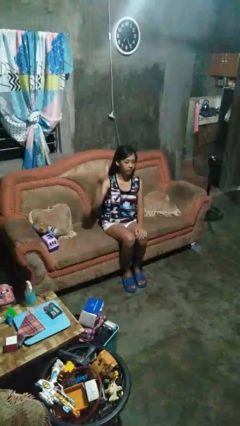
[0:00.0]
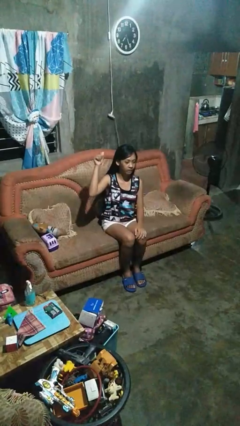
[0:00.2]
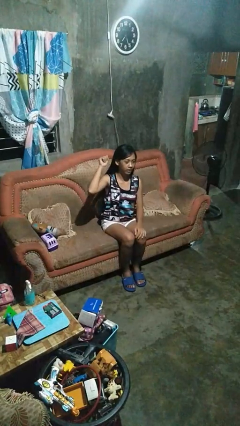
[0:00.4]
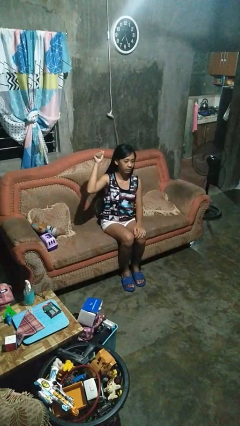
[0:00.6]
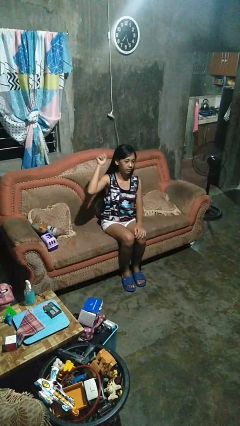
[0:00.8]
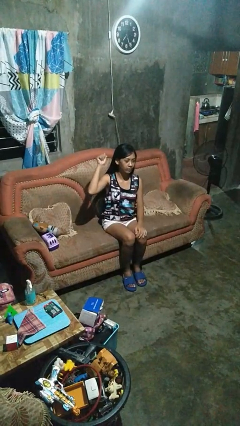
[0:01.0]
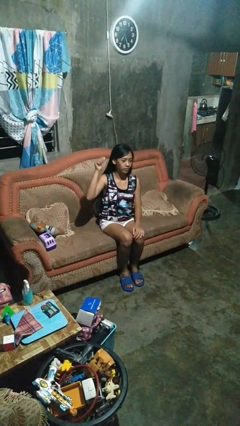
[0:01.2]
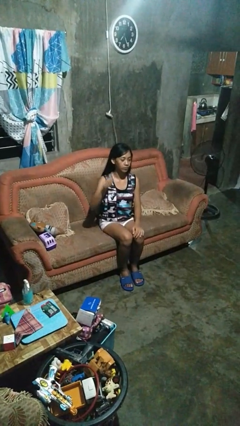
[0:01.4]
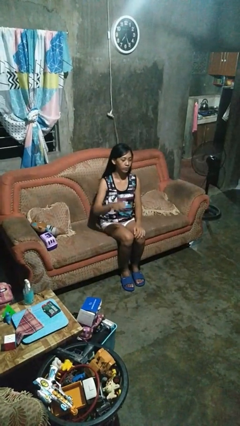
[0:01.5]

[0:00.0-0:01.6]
person gestures behind me

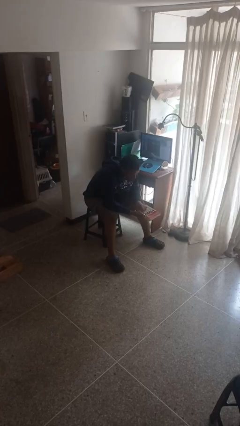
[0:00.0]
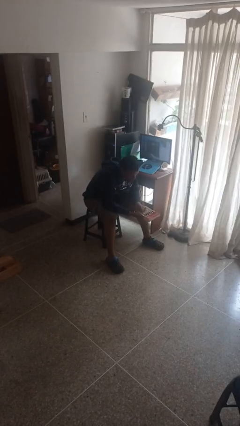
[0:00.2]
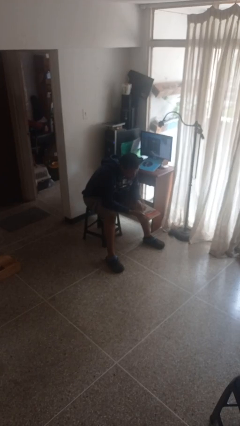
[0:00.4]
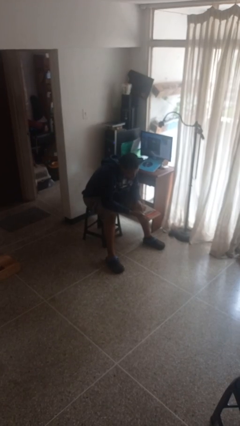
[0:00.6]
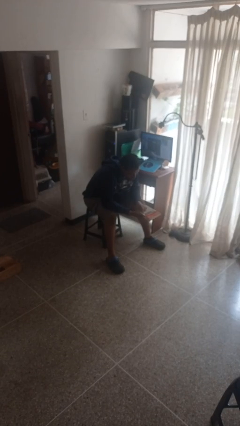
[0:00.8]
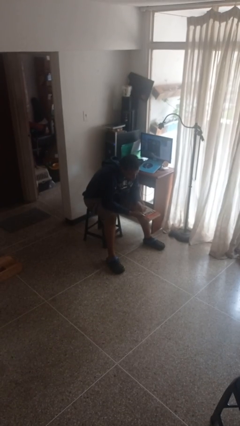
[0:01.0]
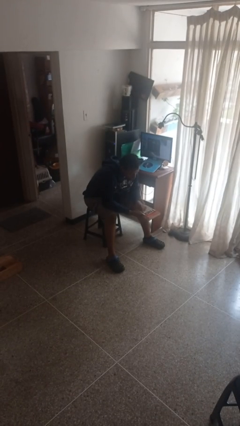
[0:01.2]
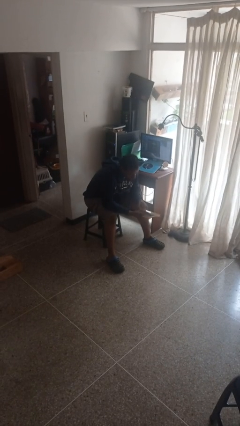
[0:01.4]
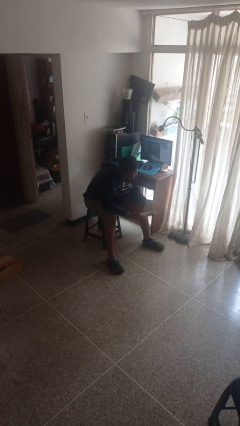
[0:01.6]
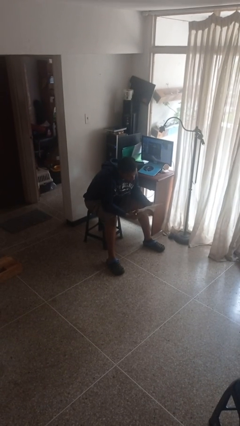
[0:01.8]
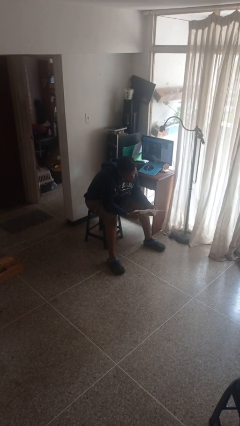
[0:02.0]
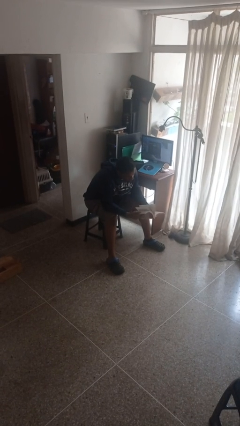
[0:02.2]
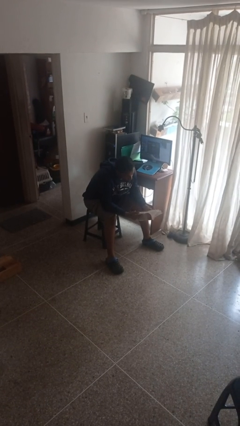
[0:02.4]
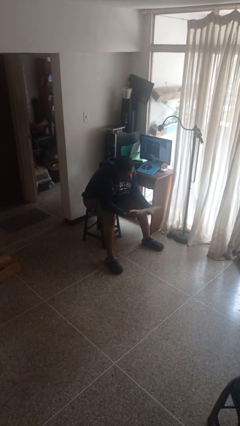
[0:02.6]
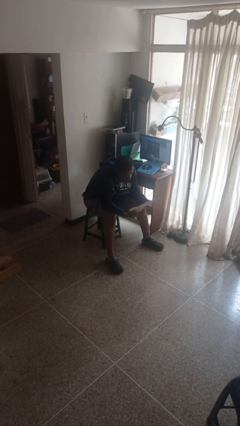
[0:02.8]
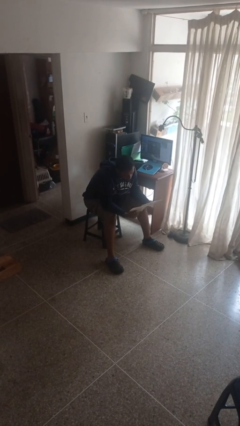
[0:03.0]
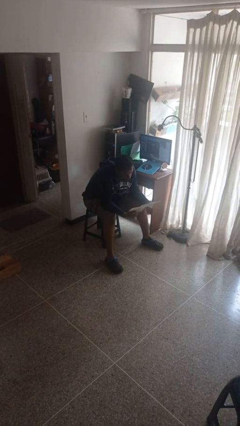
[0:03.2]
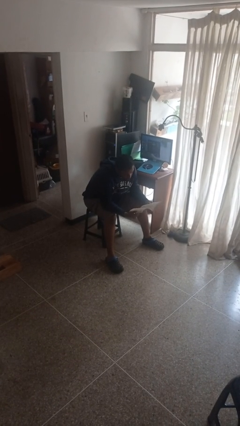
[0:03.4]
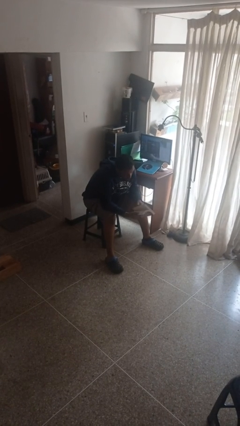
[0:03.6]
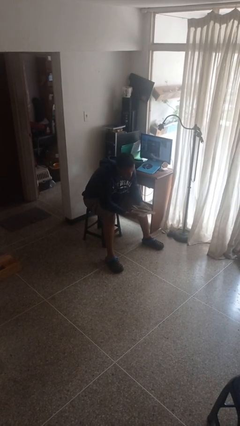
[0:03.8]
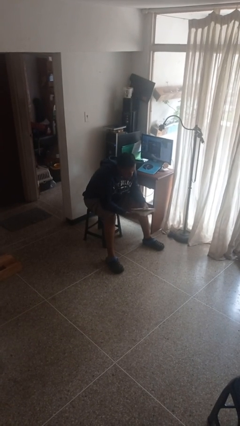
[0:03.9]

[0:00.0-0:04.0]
person reads book

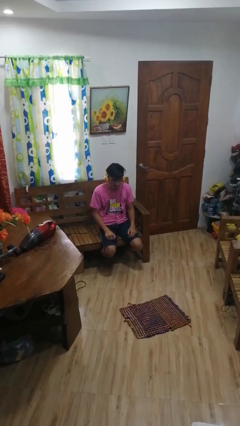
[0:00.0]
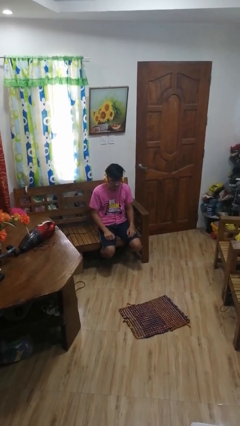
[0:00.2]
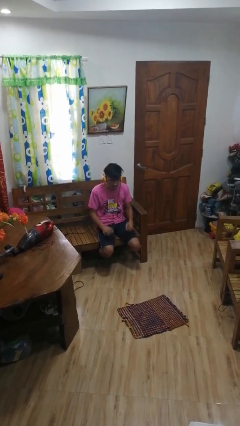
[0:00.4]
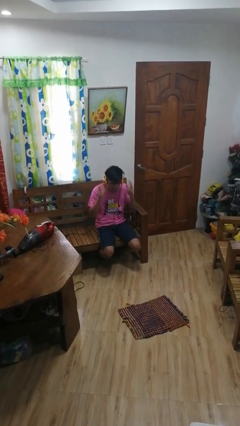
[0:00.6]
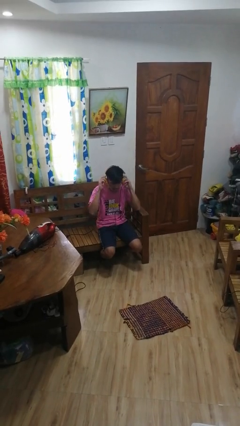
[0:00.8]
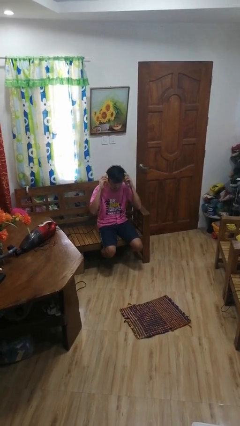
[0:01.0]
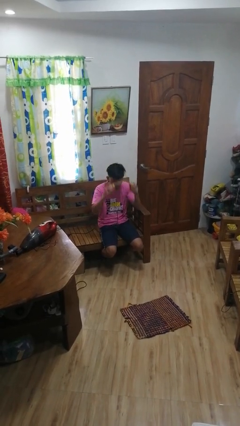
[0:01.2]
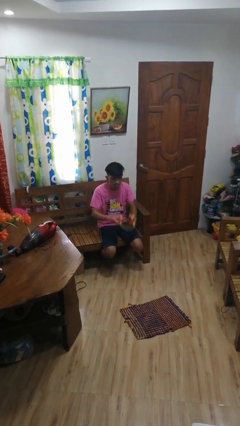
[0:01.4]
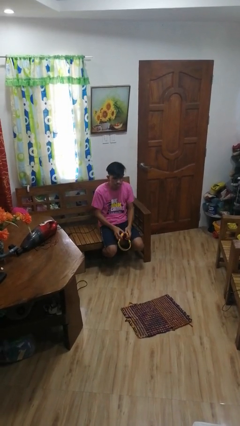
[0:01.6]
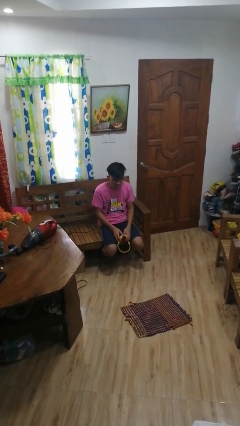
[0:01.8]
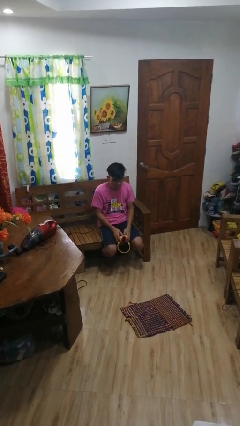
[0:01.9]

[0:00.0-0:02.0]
person takes off headphones

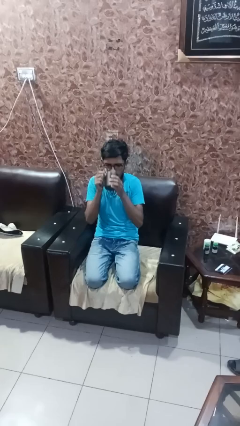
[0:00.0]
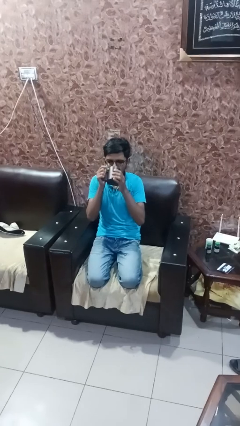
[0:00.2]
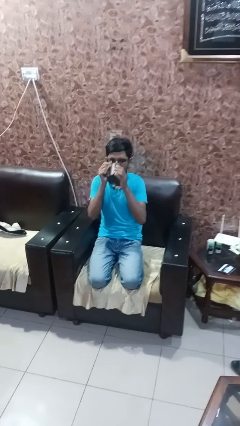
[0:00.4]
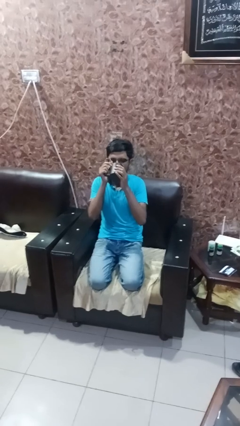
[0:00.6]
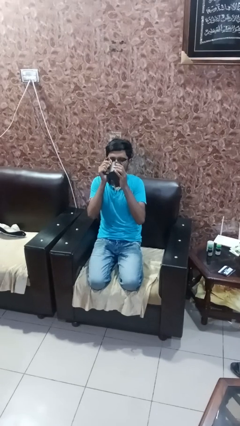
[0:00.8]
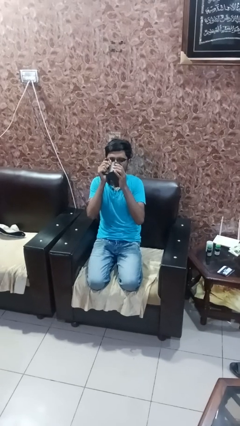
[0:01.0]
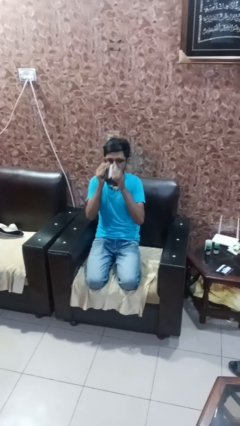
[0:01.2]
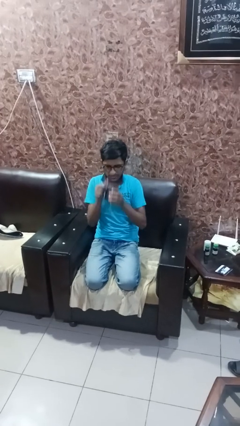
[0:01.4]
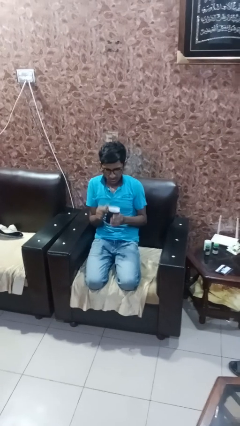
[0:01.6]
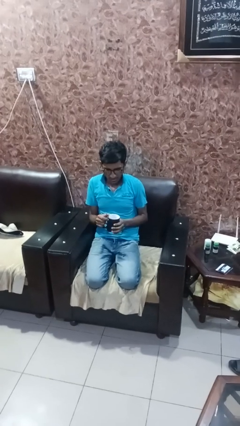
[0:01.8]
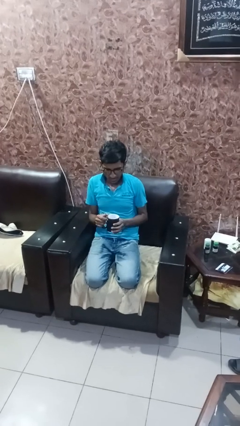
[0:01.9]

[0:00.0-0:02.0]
person drinks from mug

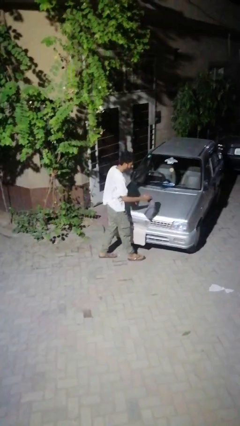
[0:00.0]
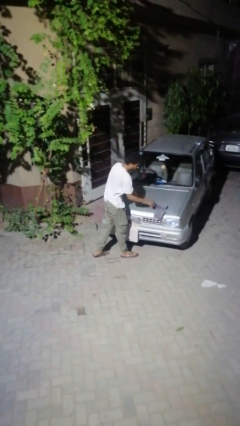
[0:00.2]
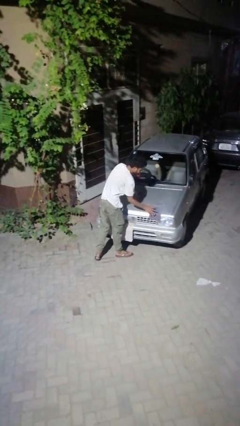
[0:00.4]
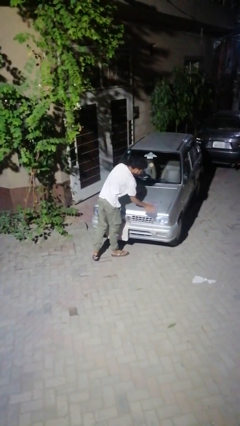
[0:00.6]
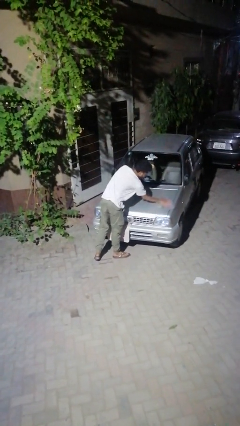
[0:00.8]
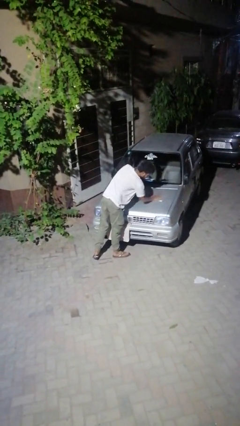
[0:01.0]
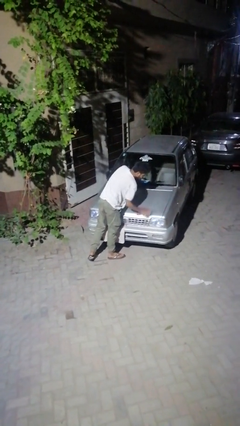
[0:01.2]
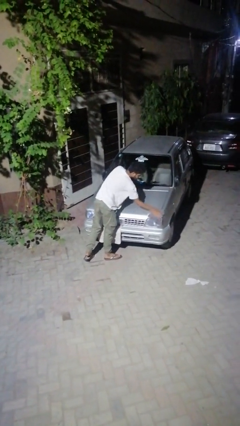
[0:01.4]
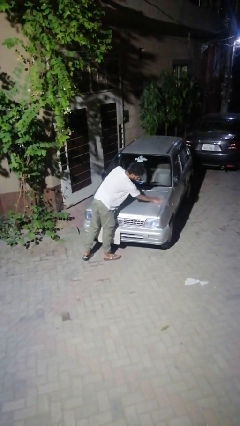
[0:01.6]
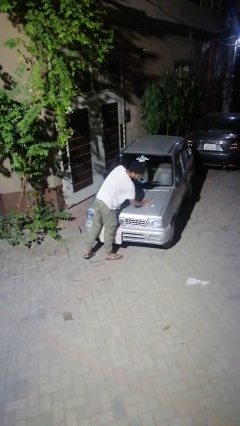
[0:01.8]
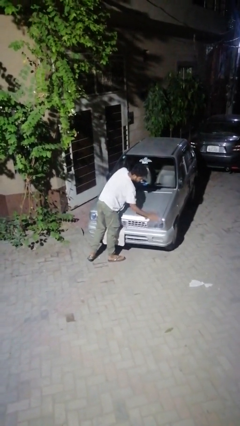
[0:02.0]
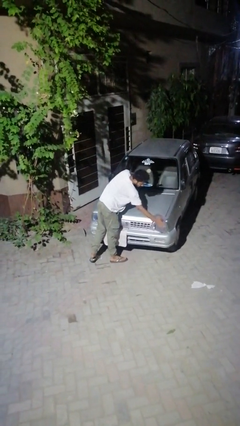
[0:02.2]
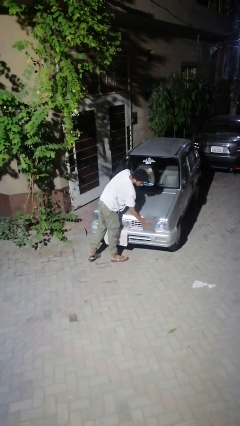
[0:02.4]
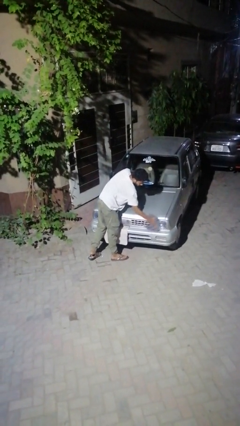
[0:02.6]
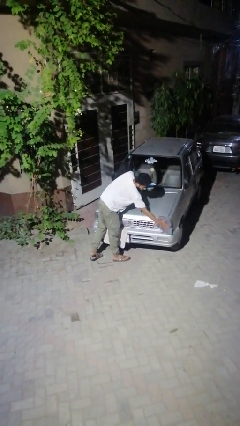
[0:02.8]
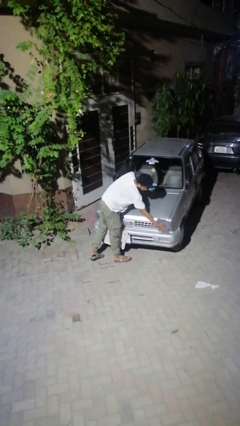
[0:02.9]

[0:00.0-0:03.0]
person polishes car with rag

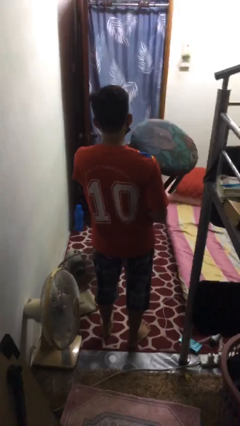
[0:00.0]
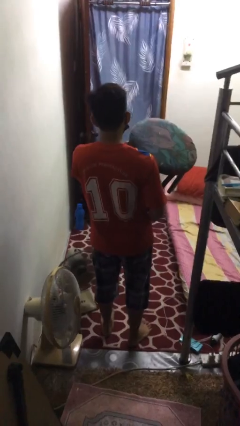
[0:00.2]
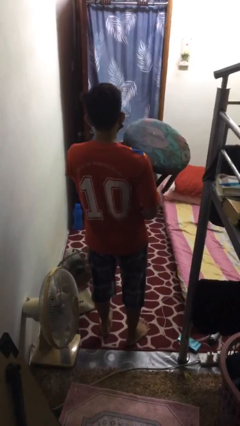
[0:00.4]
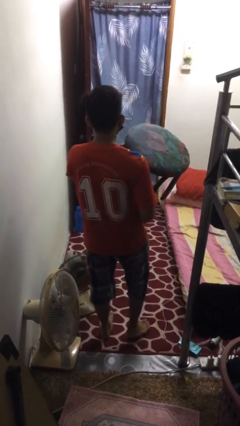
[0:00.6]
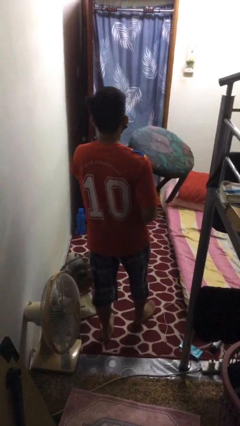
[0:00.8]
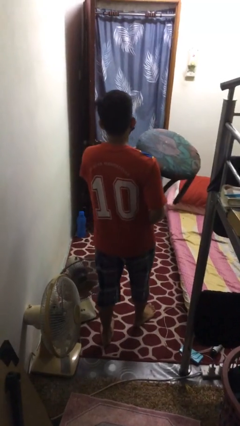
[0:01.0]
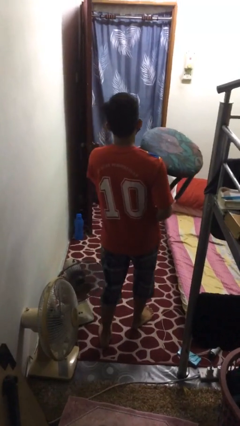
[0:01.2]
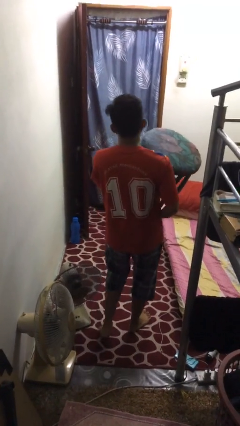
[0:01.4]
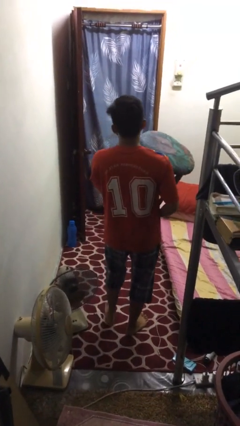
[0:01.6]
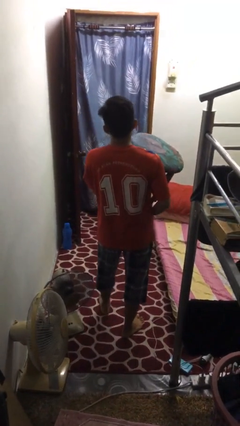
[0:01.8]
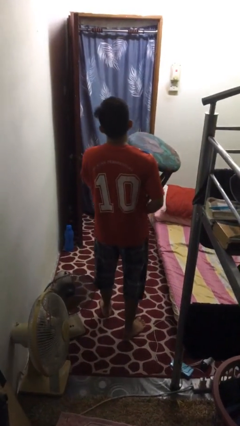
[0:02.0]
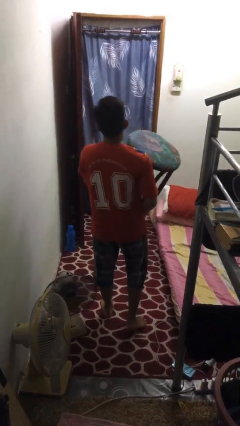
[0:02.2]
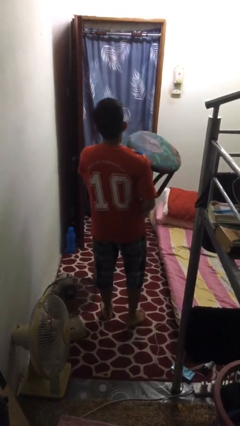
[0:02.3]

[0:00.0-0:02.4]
person carries furniture

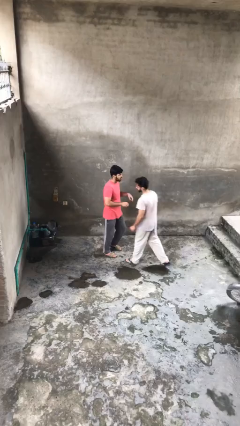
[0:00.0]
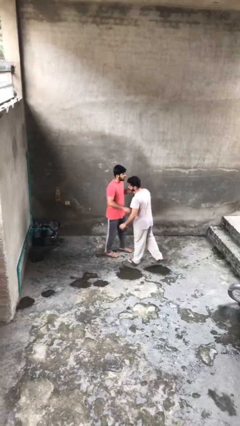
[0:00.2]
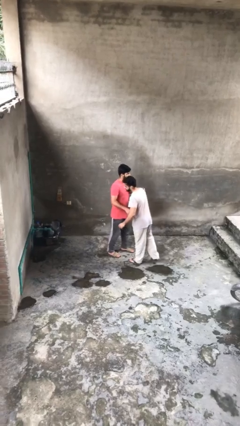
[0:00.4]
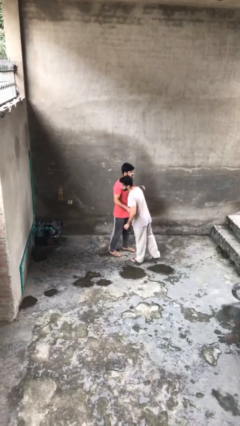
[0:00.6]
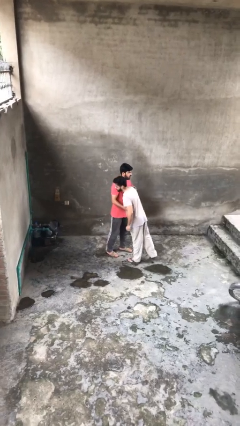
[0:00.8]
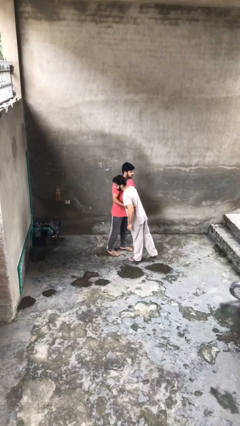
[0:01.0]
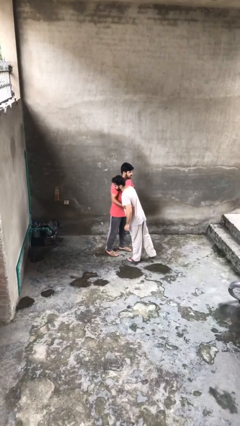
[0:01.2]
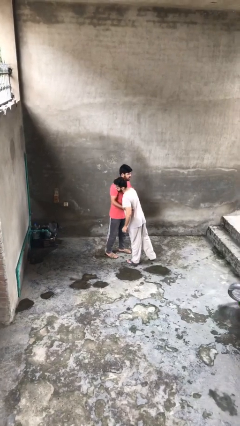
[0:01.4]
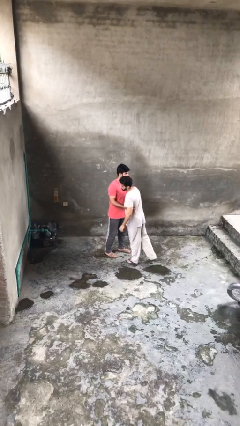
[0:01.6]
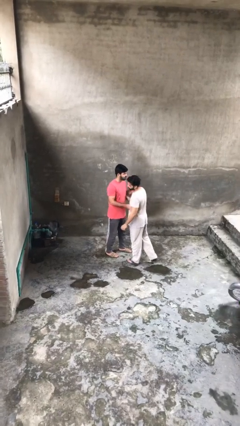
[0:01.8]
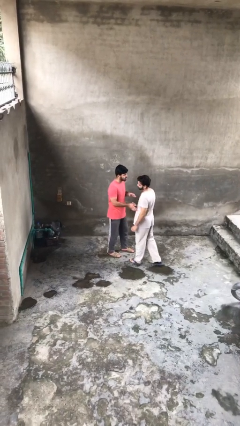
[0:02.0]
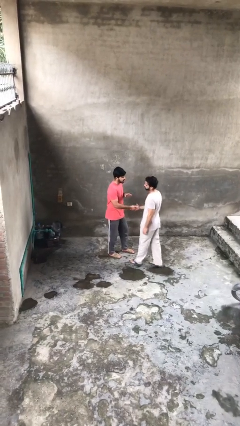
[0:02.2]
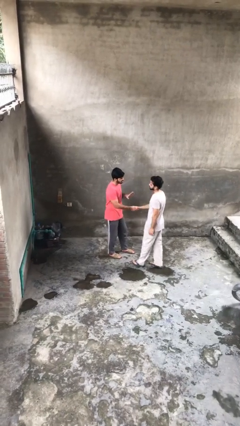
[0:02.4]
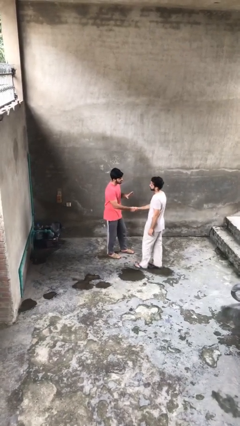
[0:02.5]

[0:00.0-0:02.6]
person embraces person
